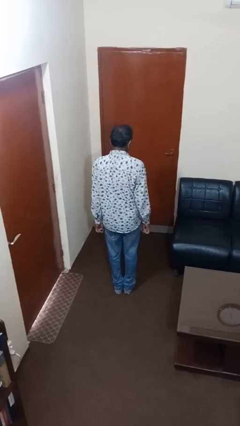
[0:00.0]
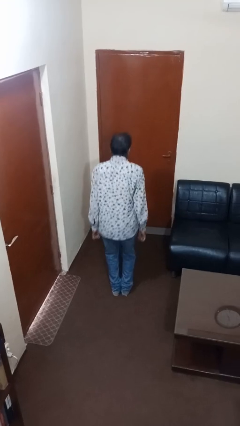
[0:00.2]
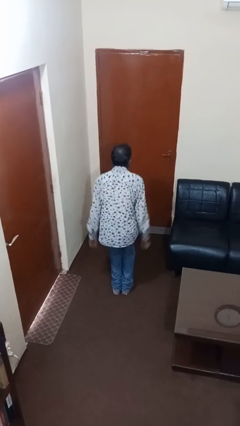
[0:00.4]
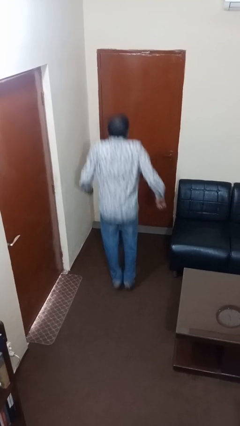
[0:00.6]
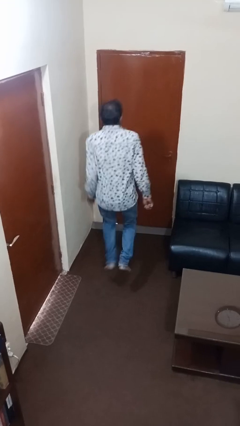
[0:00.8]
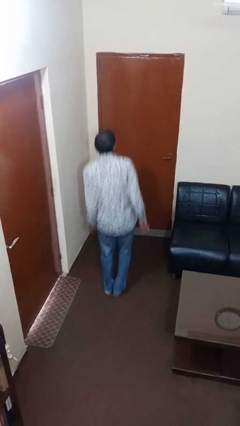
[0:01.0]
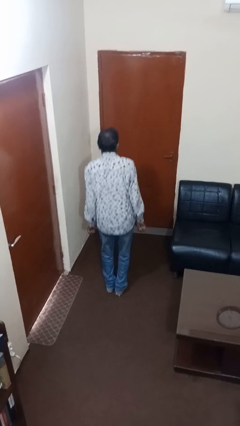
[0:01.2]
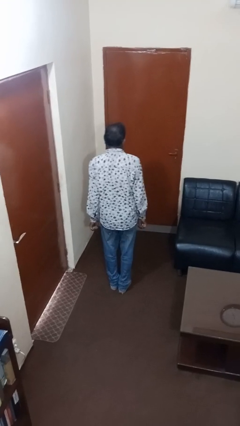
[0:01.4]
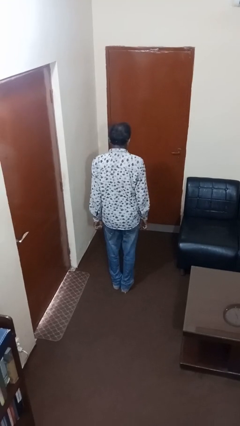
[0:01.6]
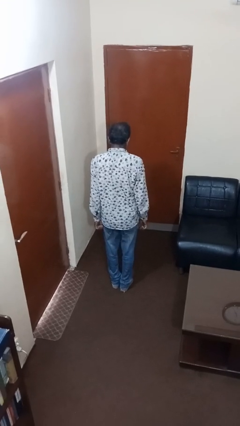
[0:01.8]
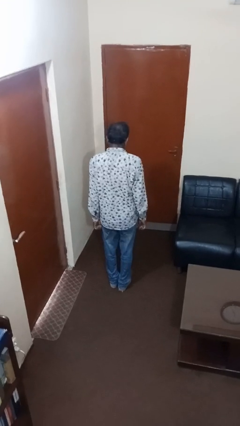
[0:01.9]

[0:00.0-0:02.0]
person jumps

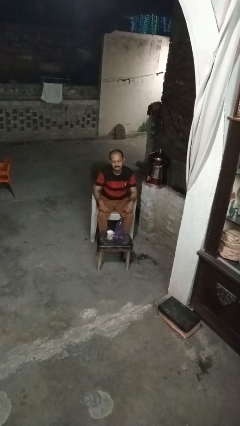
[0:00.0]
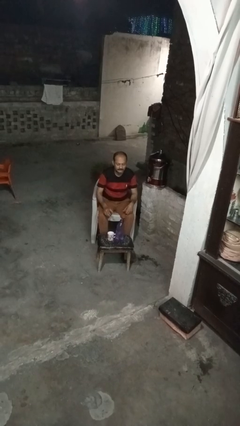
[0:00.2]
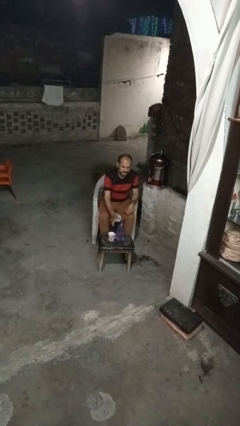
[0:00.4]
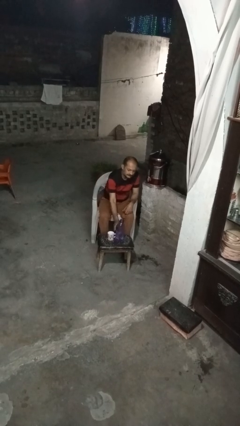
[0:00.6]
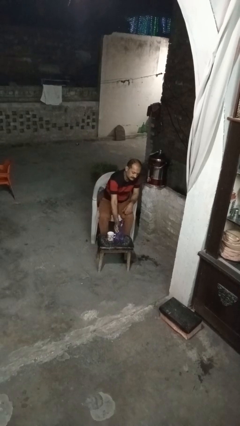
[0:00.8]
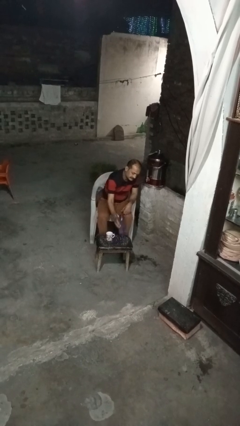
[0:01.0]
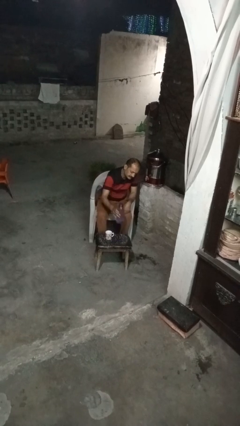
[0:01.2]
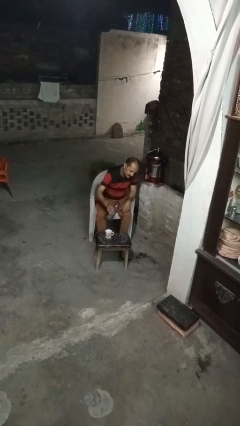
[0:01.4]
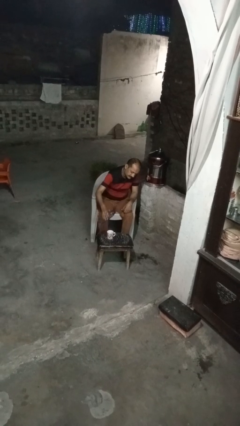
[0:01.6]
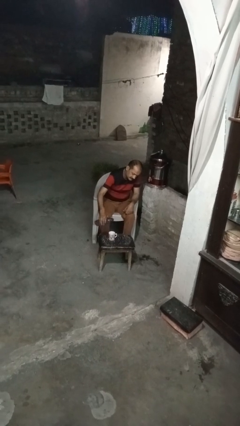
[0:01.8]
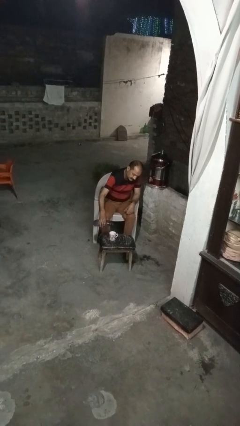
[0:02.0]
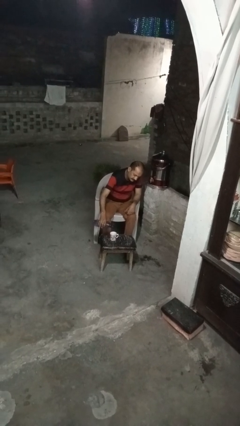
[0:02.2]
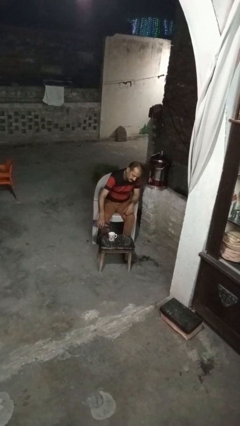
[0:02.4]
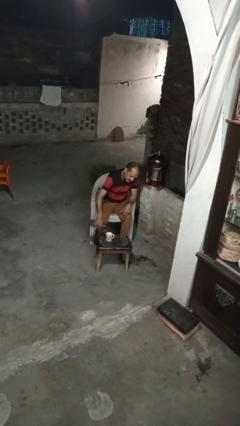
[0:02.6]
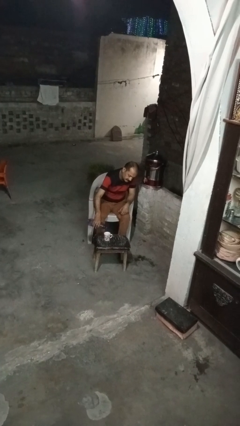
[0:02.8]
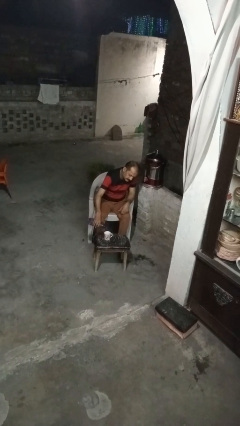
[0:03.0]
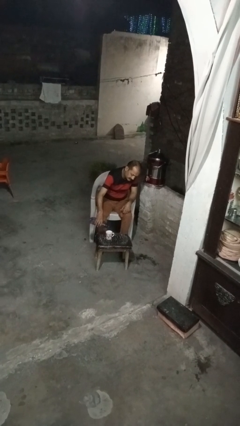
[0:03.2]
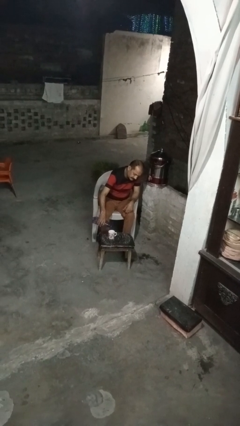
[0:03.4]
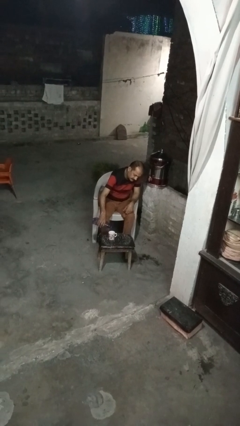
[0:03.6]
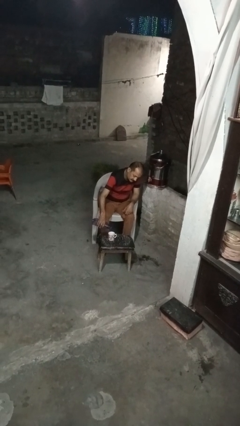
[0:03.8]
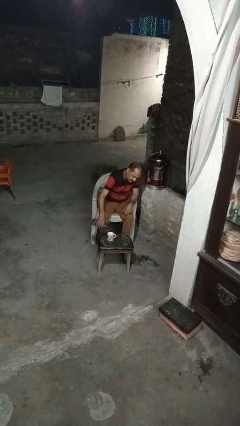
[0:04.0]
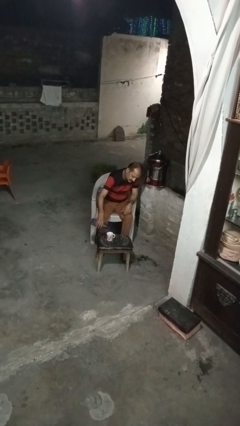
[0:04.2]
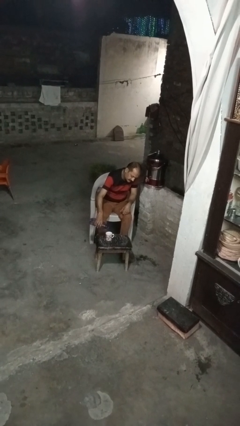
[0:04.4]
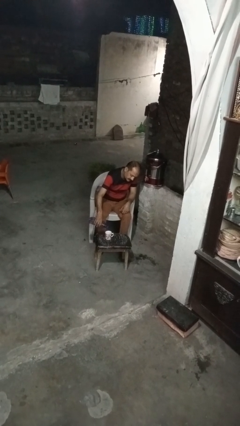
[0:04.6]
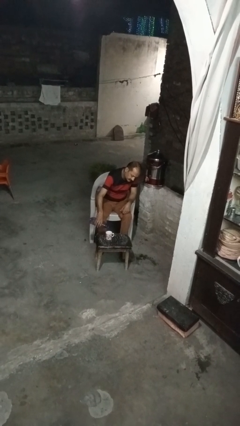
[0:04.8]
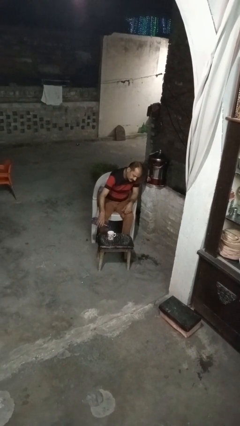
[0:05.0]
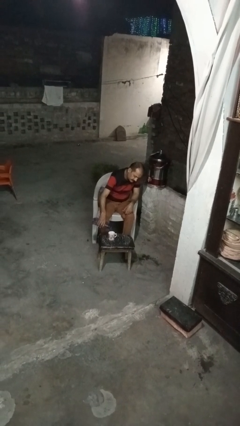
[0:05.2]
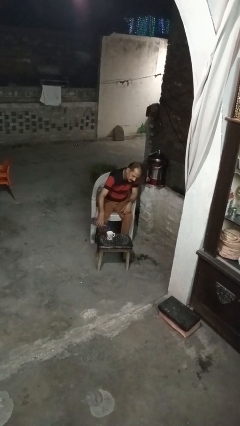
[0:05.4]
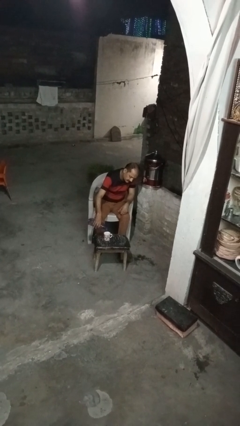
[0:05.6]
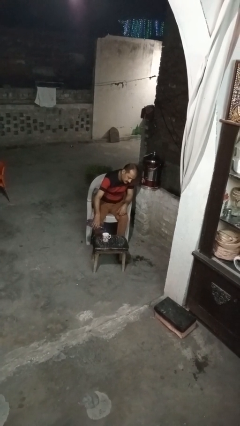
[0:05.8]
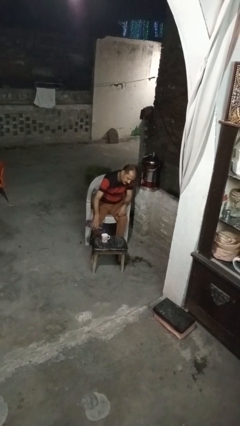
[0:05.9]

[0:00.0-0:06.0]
person pours liquid into cup

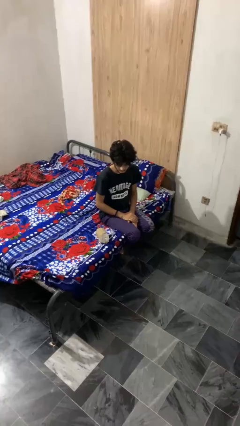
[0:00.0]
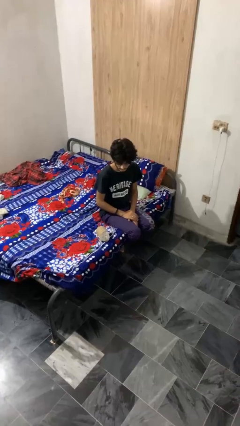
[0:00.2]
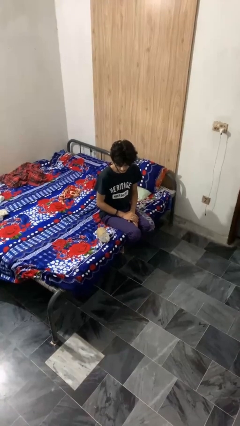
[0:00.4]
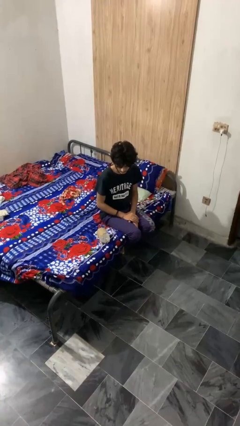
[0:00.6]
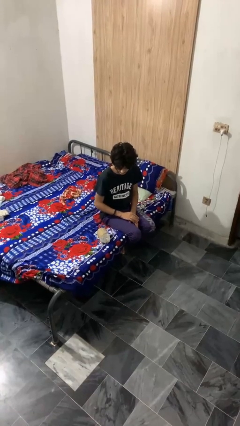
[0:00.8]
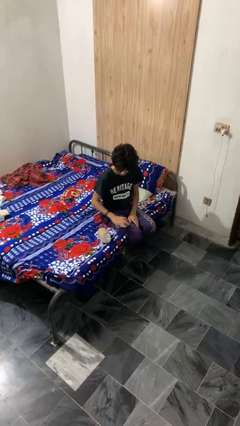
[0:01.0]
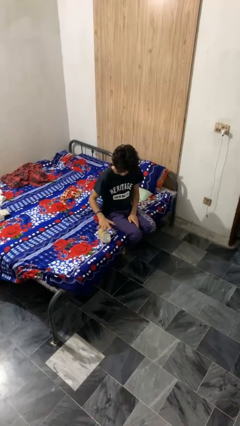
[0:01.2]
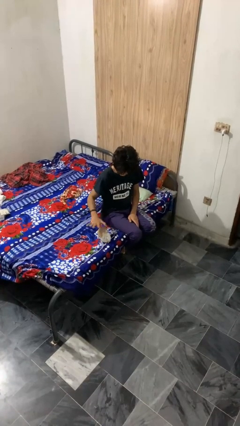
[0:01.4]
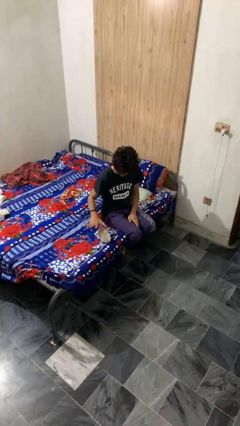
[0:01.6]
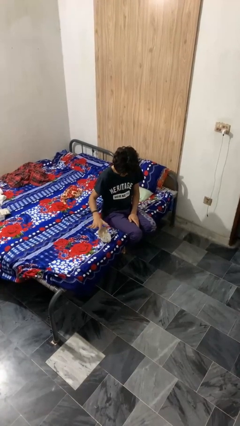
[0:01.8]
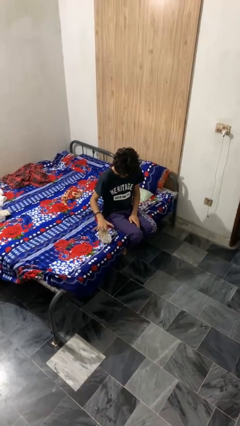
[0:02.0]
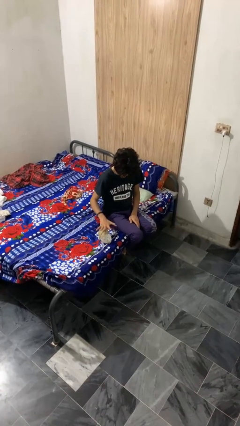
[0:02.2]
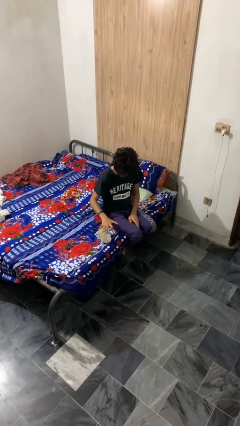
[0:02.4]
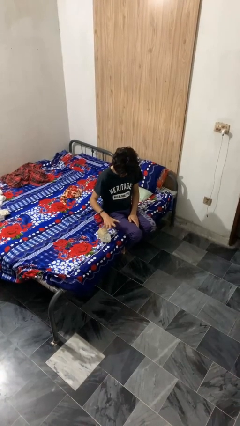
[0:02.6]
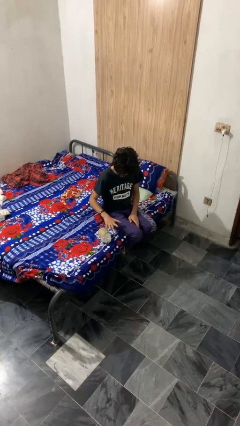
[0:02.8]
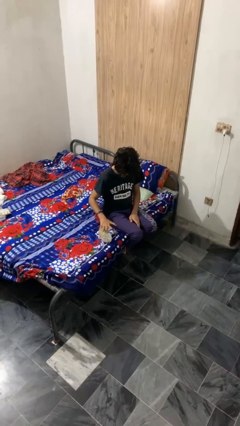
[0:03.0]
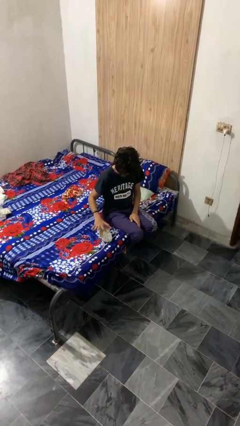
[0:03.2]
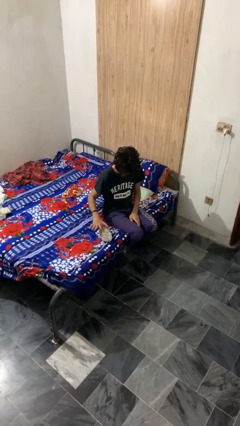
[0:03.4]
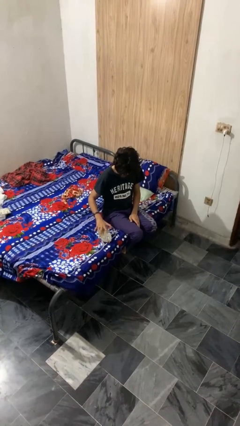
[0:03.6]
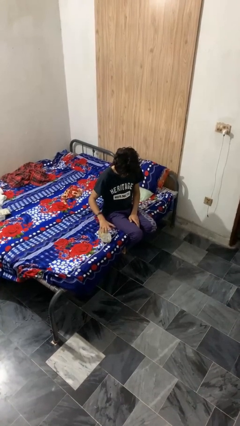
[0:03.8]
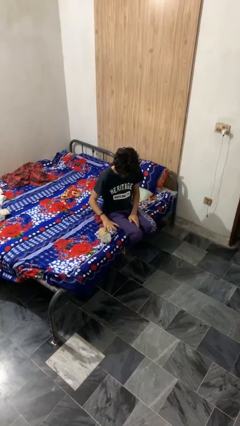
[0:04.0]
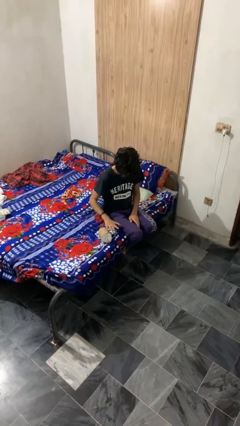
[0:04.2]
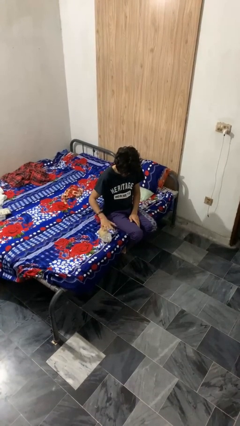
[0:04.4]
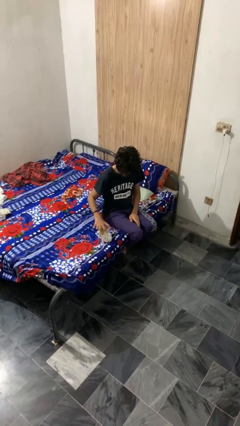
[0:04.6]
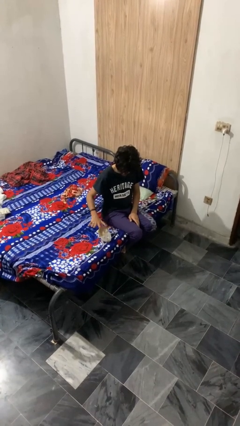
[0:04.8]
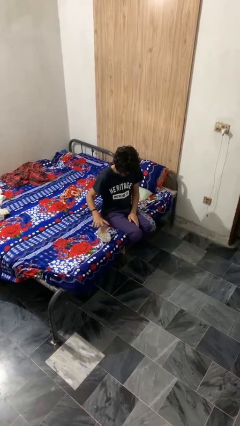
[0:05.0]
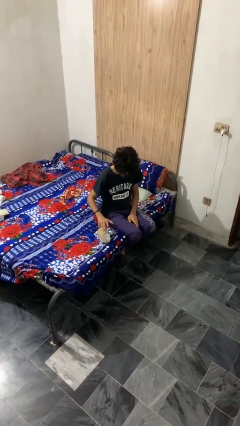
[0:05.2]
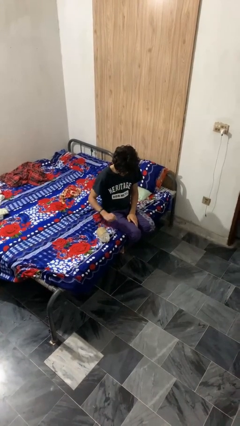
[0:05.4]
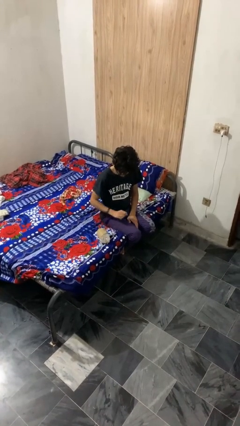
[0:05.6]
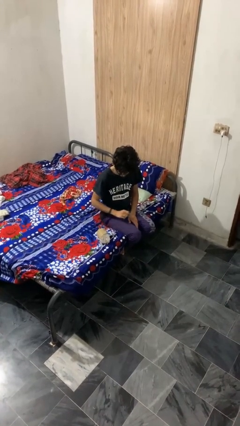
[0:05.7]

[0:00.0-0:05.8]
person waves hand over object

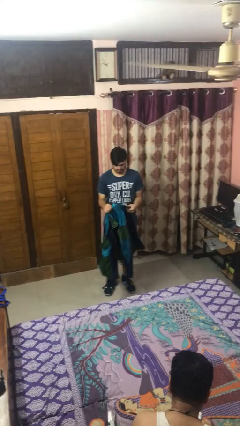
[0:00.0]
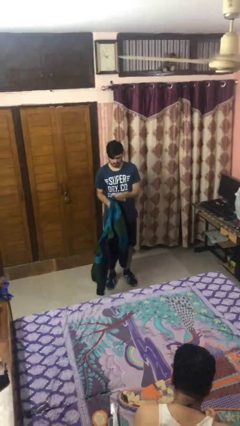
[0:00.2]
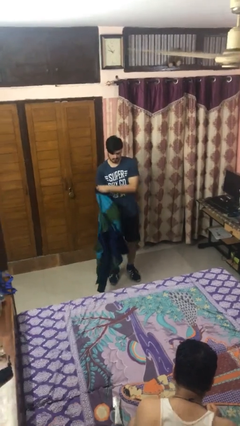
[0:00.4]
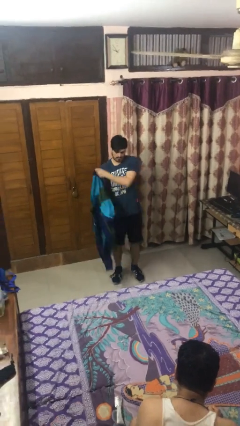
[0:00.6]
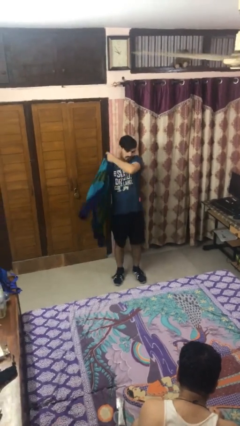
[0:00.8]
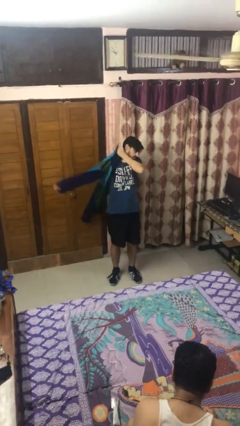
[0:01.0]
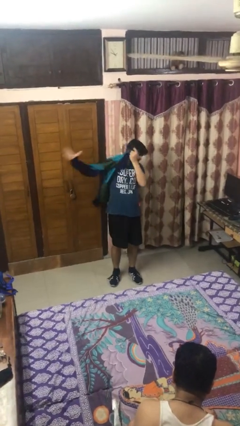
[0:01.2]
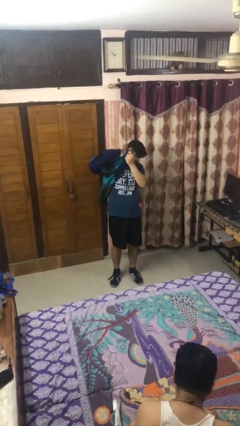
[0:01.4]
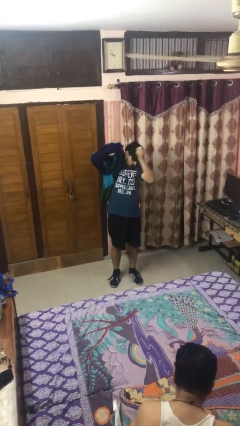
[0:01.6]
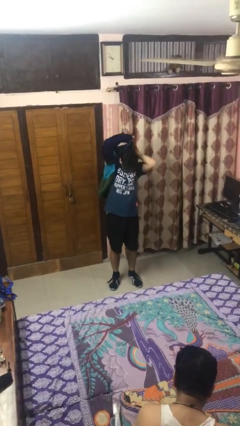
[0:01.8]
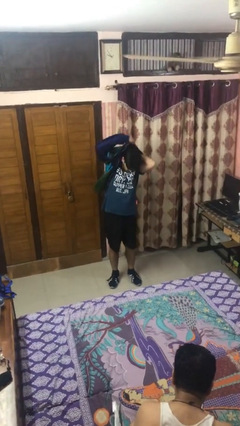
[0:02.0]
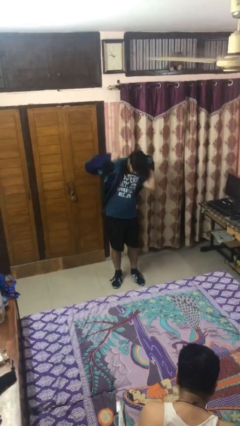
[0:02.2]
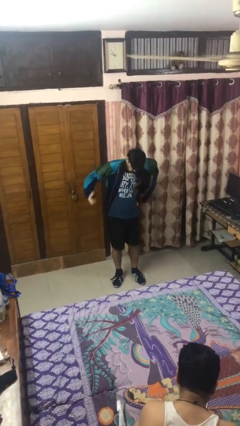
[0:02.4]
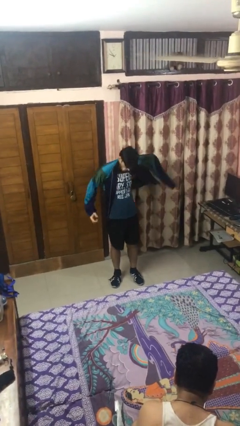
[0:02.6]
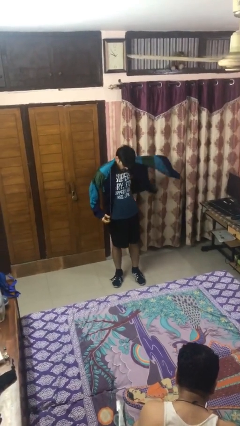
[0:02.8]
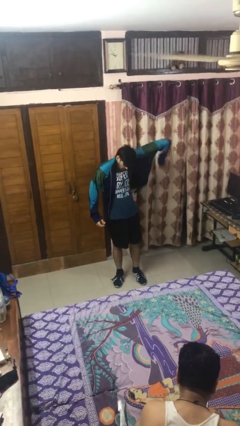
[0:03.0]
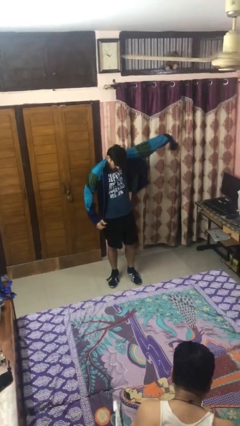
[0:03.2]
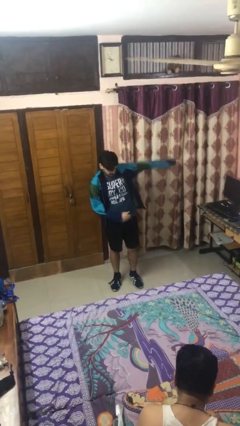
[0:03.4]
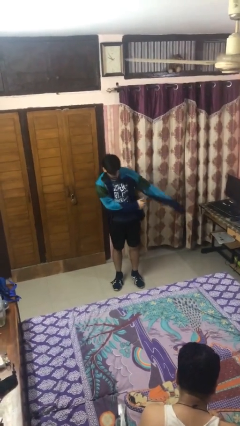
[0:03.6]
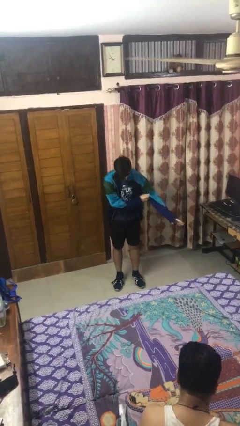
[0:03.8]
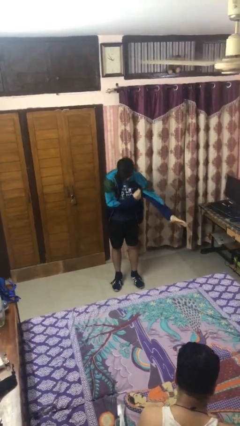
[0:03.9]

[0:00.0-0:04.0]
person puts on jacket

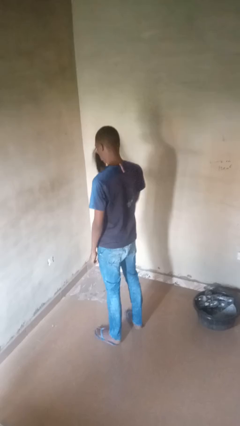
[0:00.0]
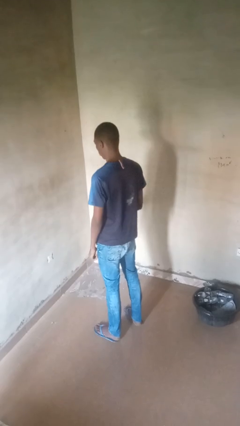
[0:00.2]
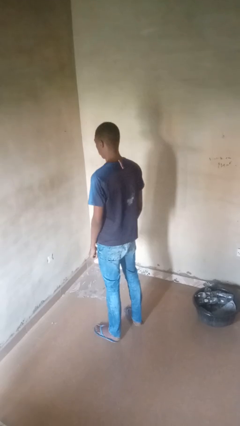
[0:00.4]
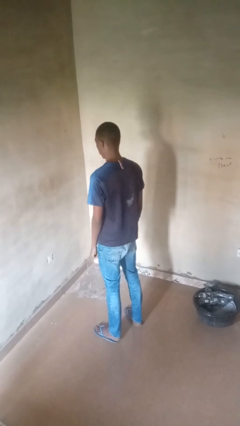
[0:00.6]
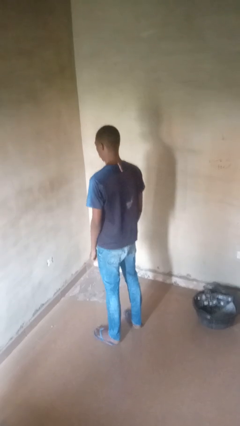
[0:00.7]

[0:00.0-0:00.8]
person takes off hat
